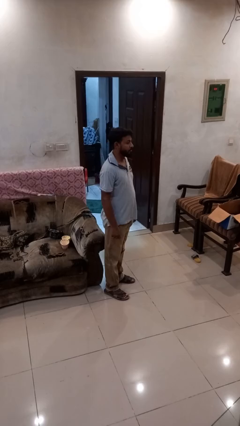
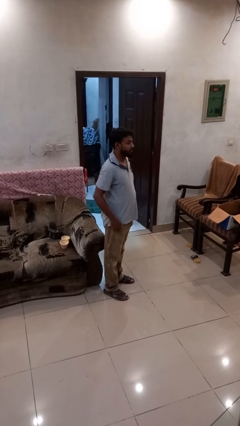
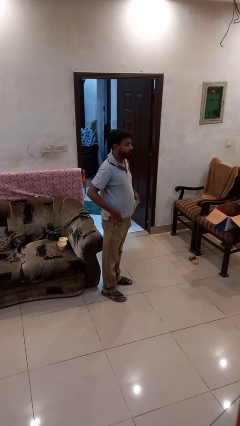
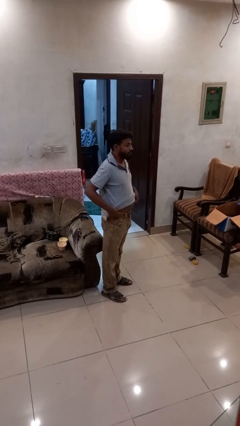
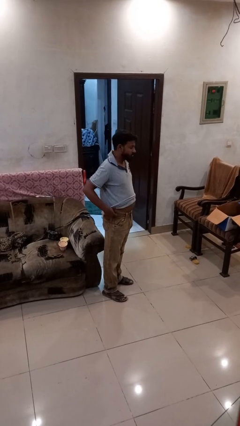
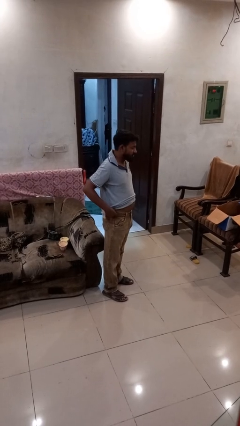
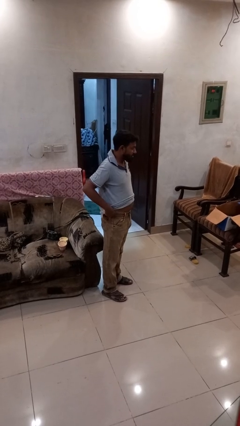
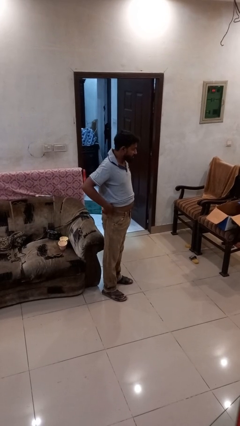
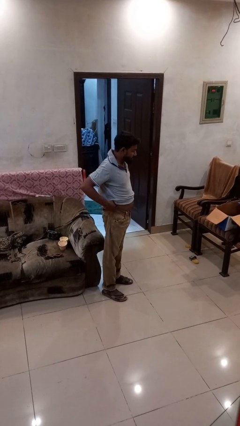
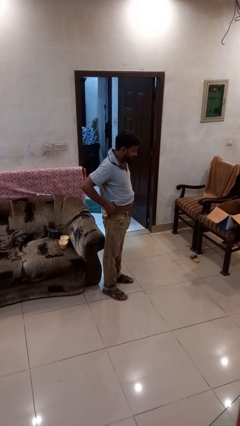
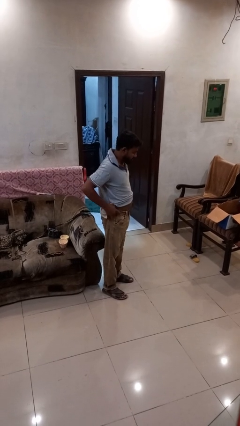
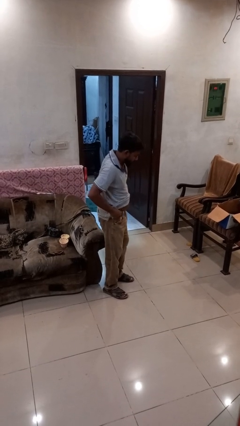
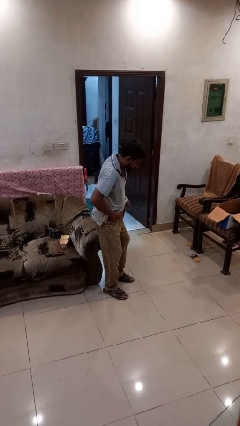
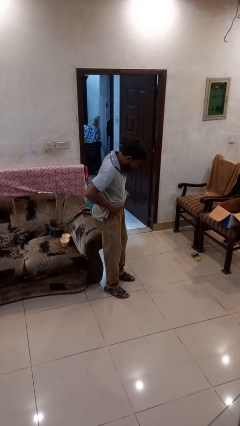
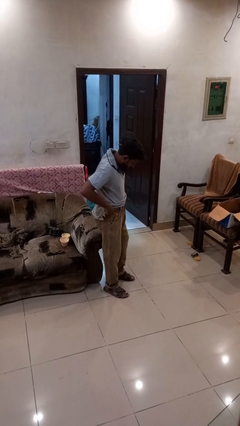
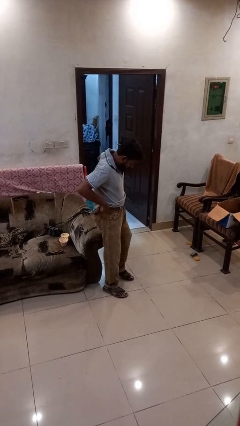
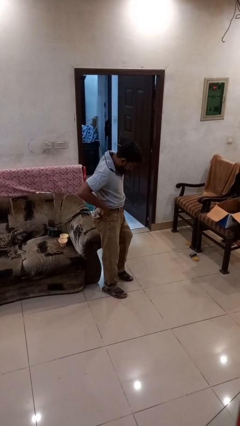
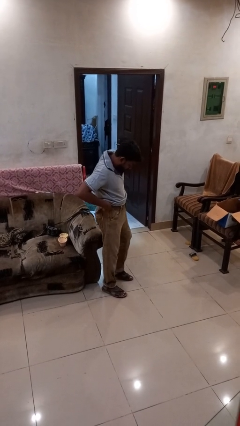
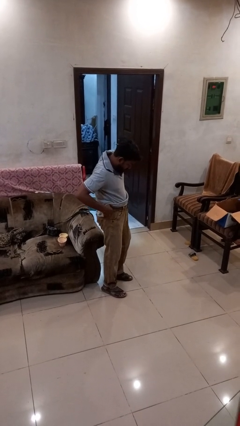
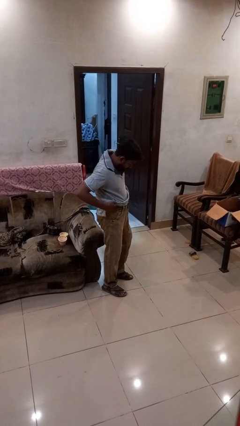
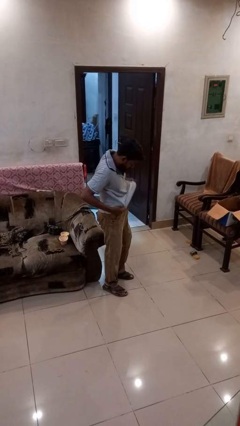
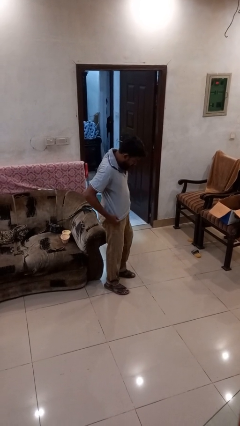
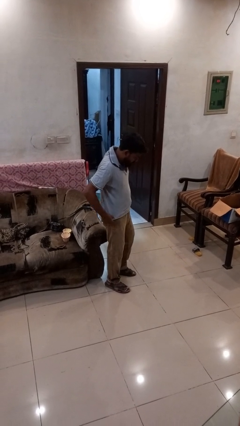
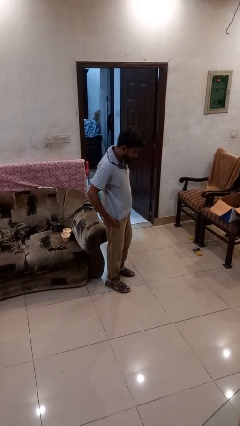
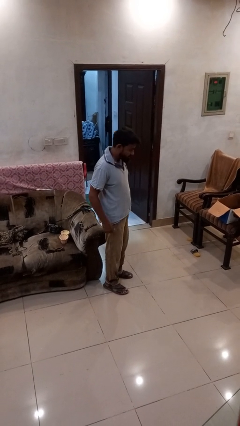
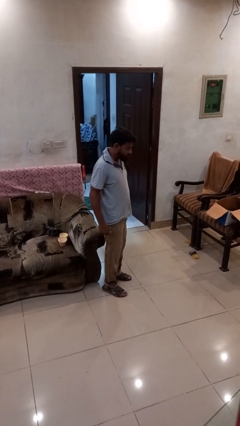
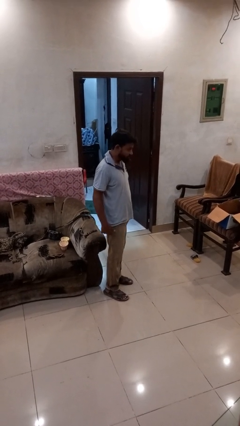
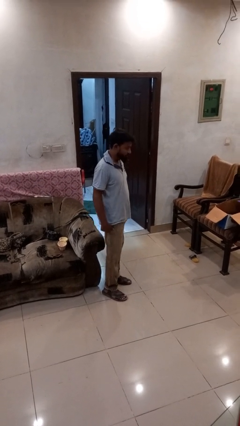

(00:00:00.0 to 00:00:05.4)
person hikes up pants

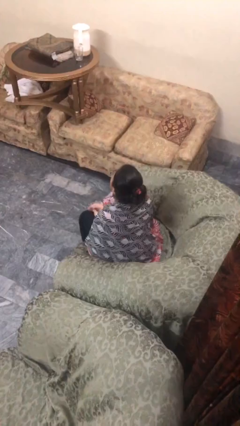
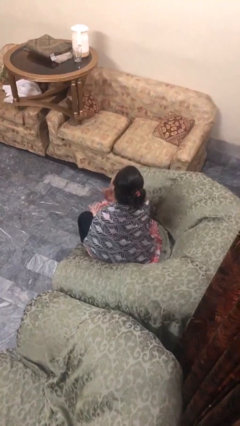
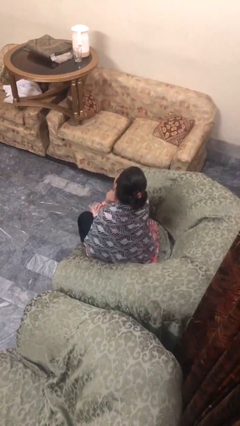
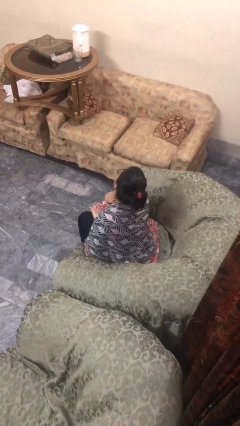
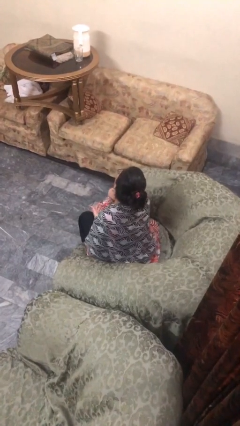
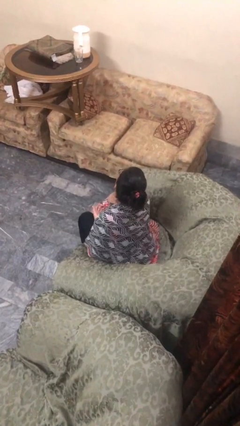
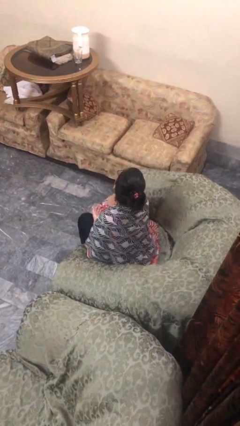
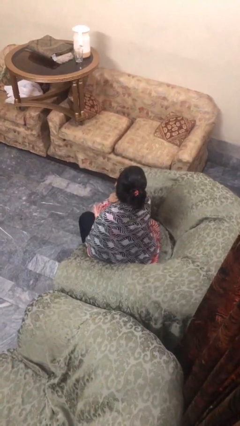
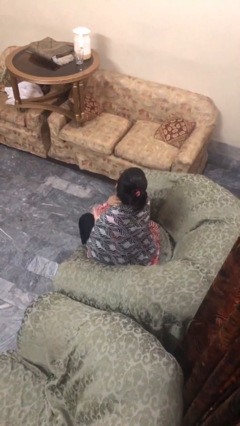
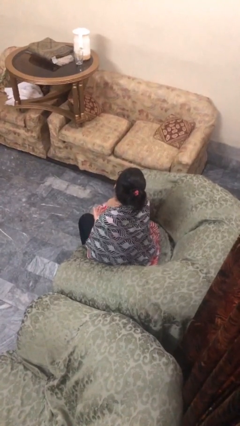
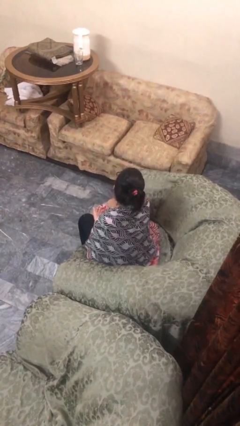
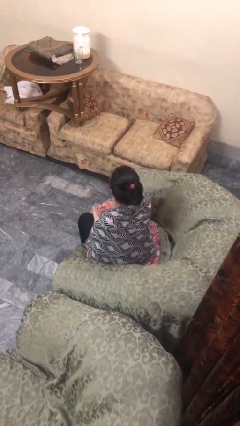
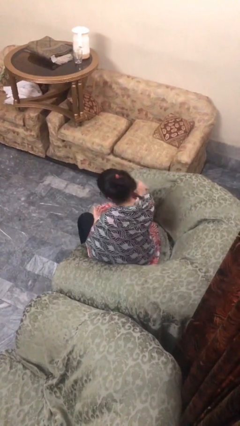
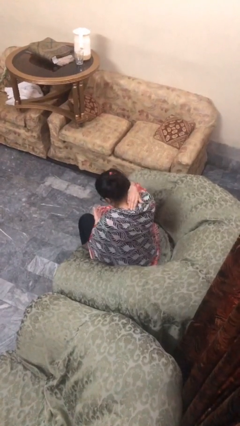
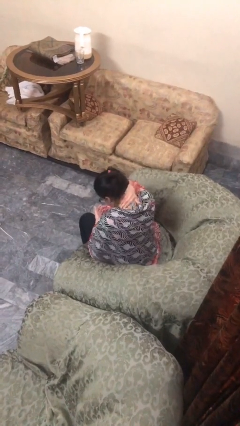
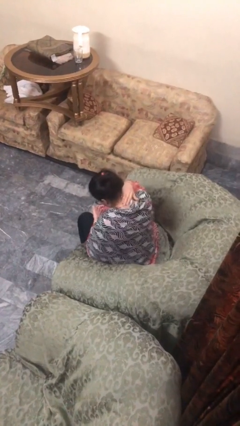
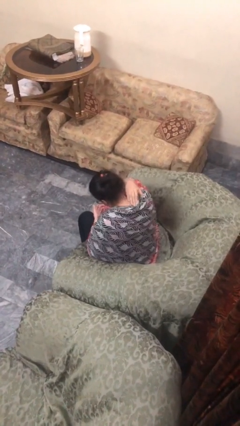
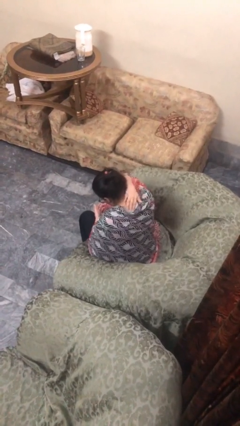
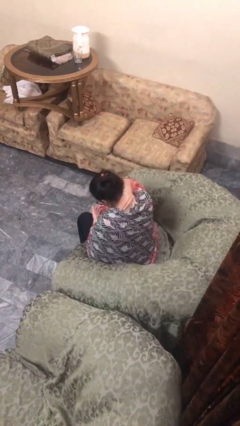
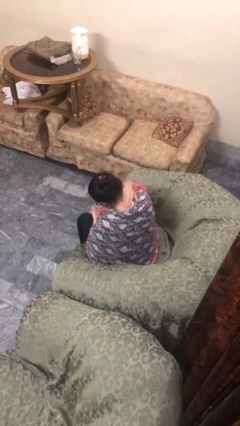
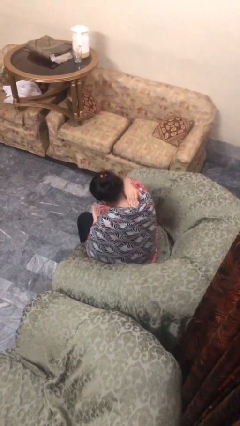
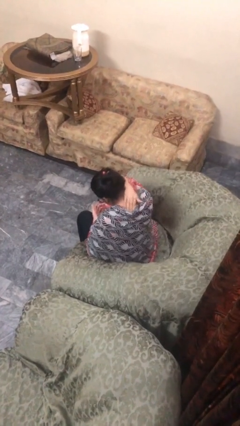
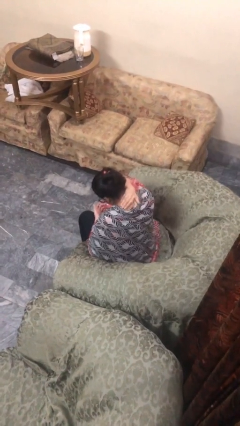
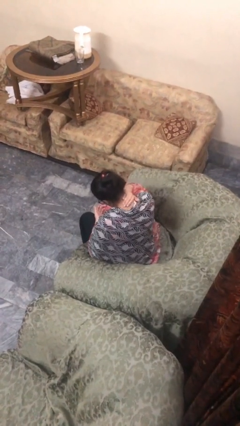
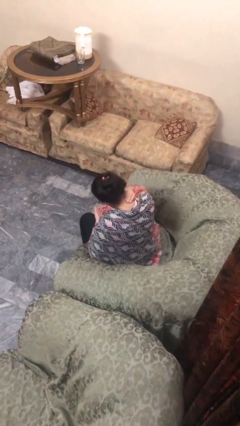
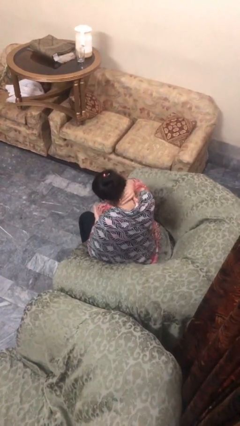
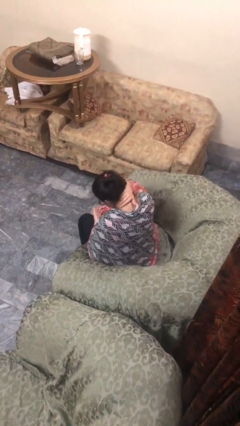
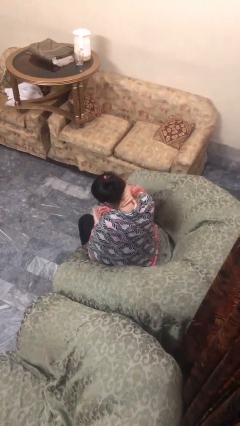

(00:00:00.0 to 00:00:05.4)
person rubs neck

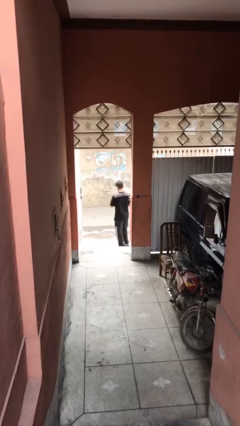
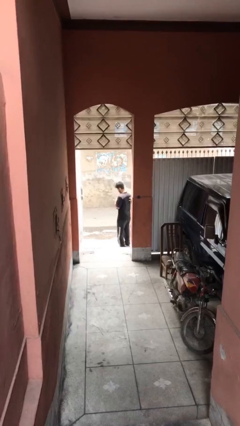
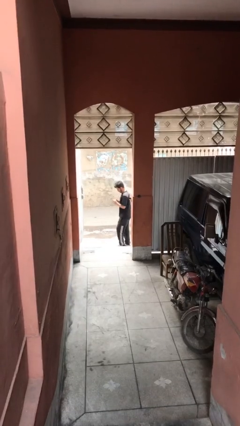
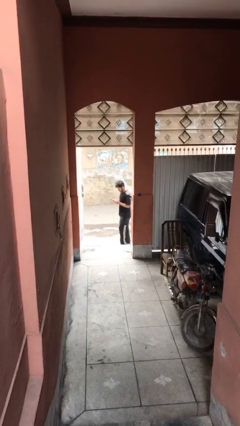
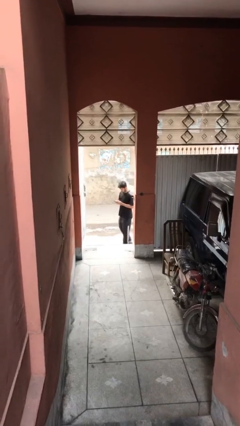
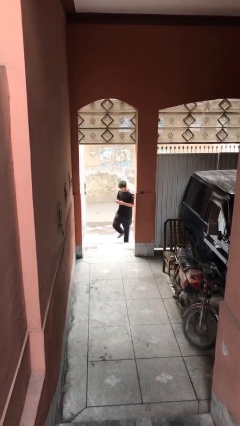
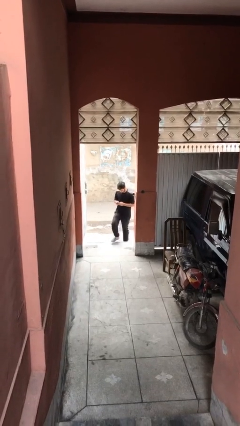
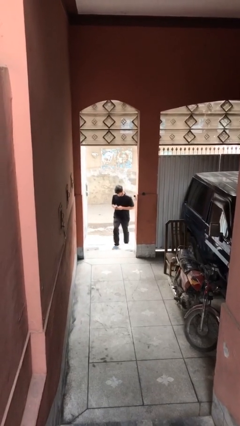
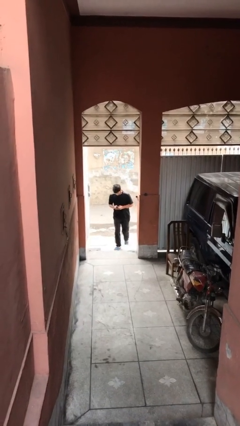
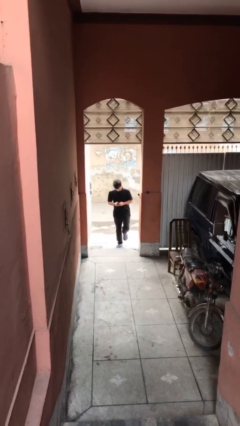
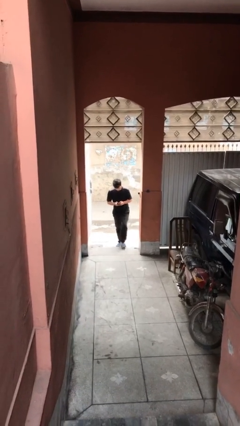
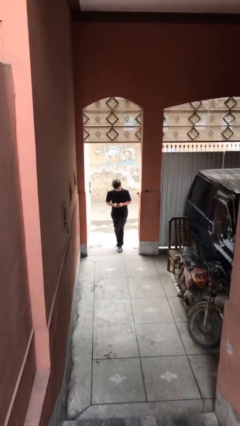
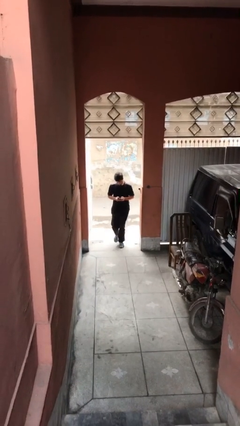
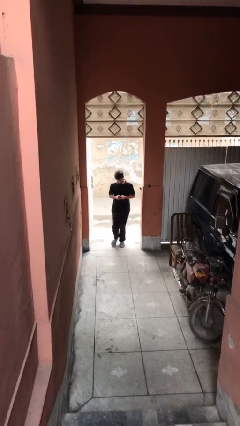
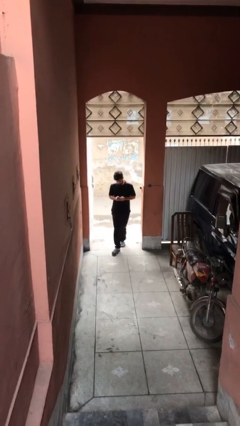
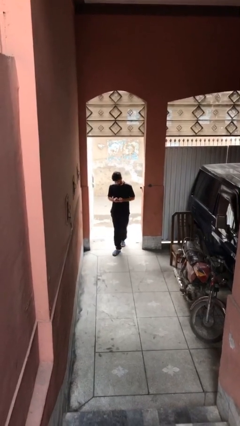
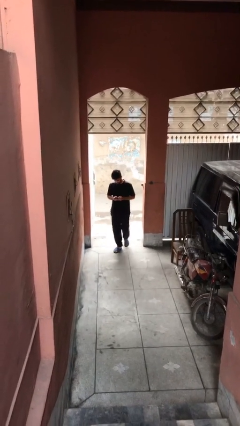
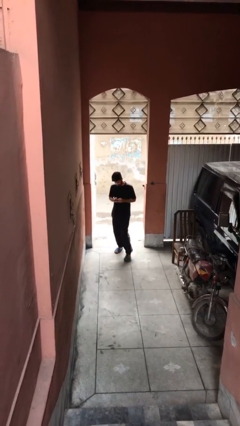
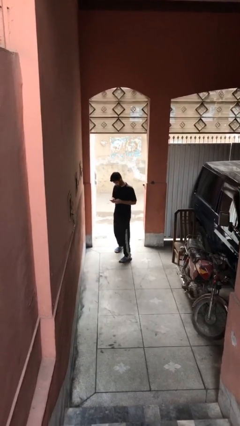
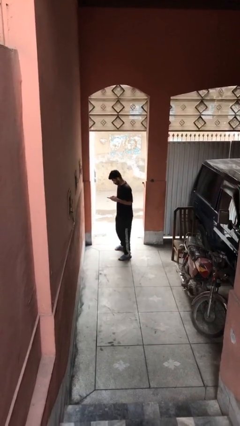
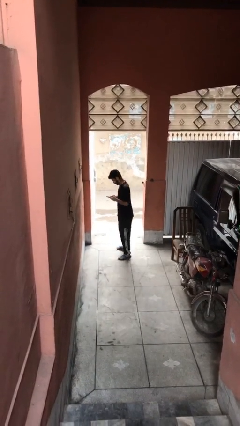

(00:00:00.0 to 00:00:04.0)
person enters scene through structure

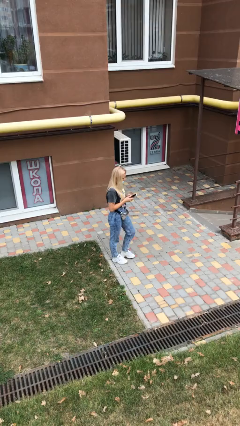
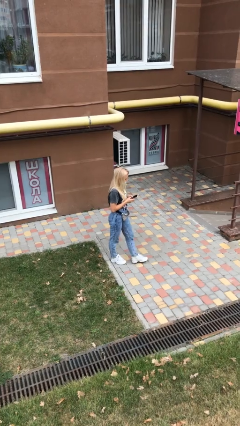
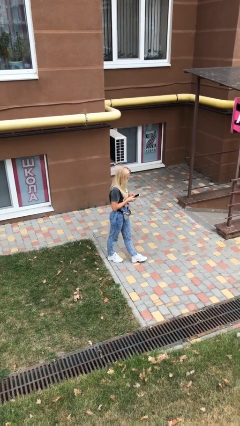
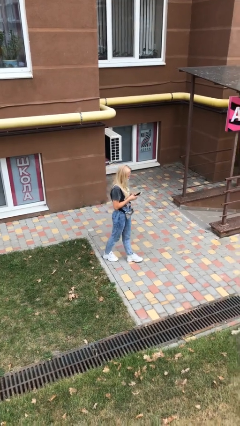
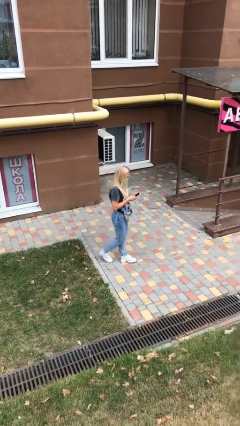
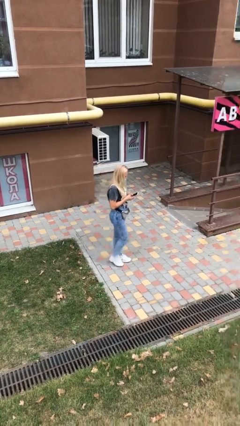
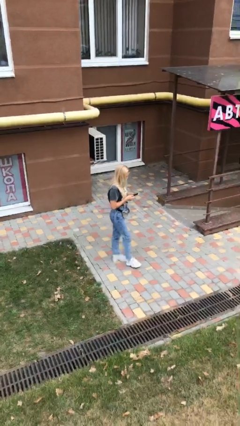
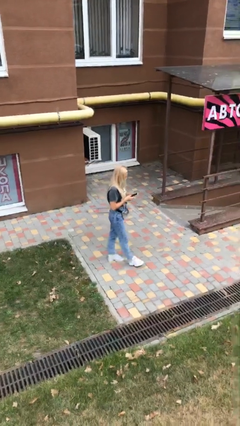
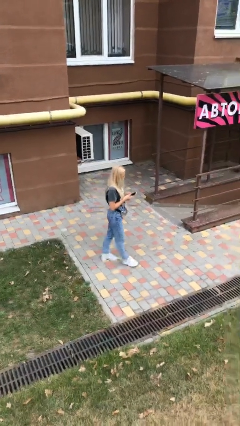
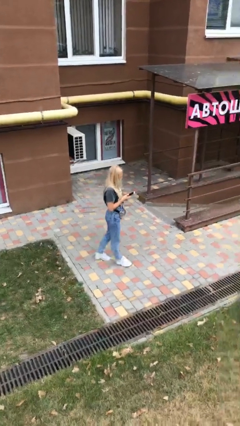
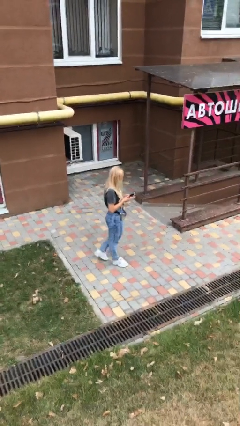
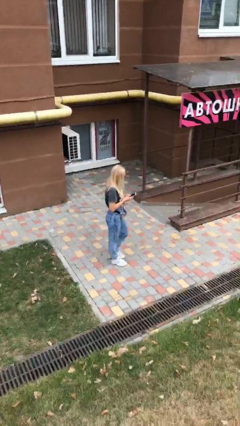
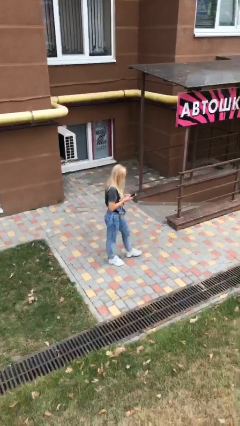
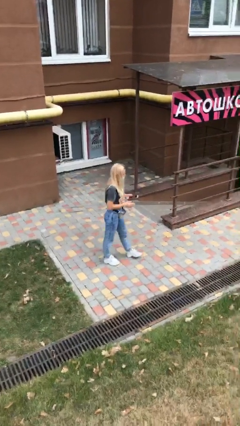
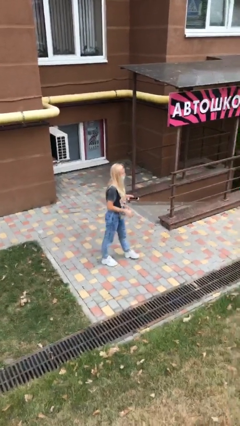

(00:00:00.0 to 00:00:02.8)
person texts on phone
